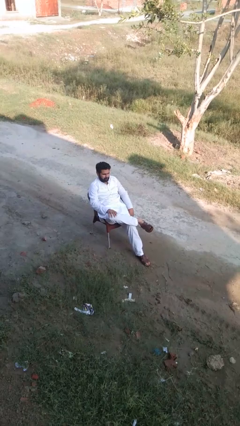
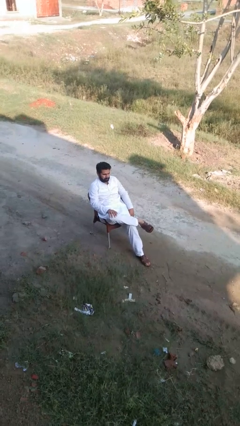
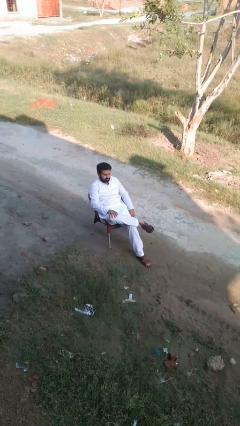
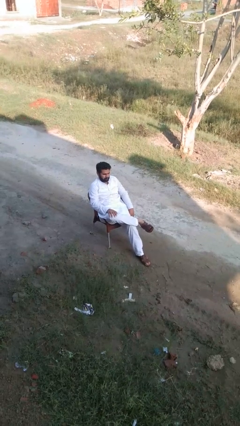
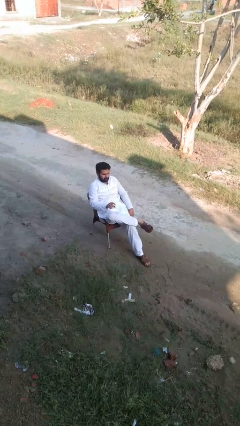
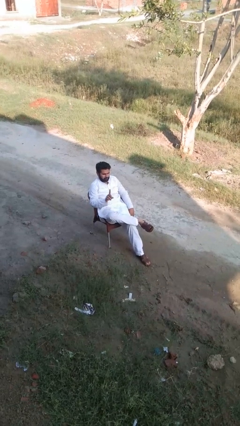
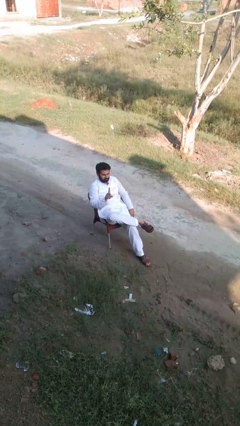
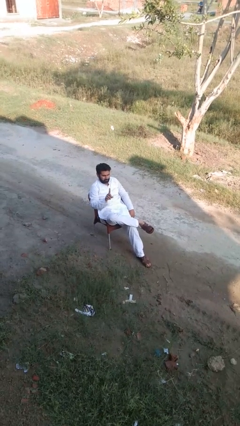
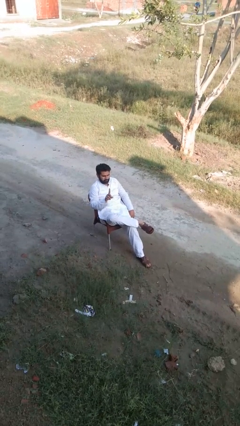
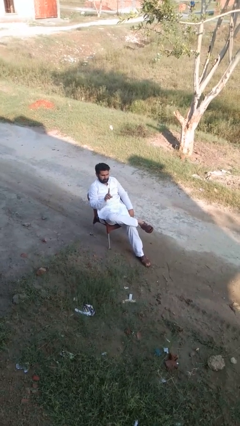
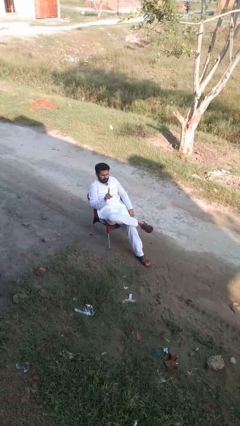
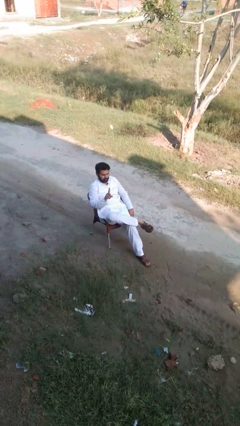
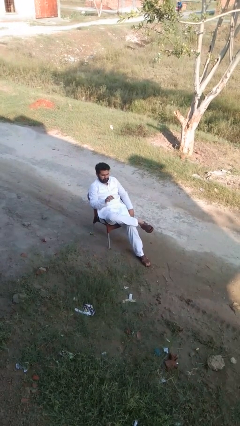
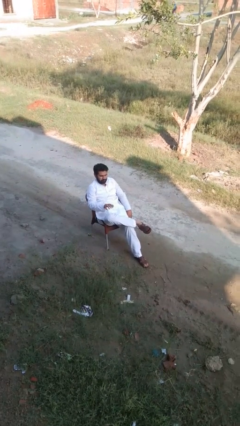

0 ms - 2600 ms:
person gestures number one

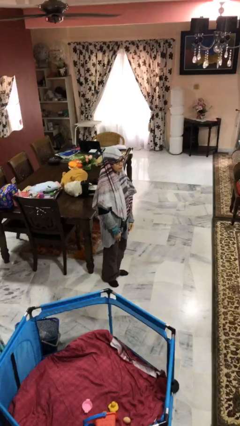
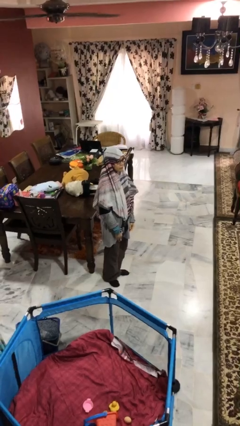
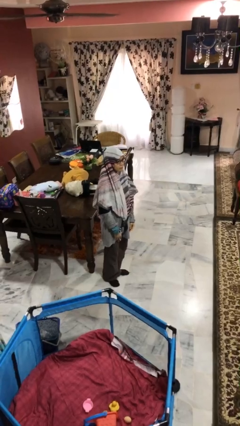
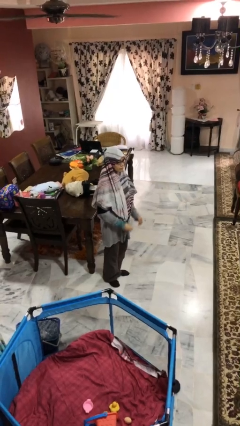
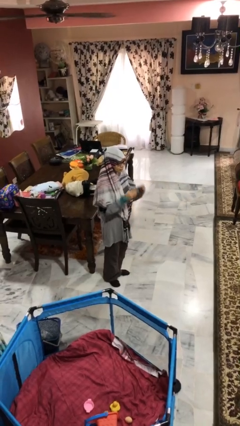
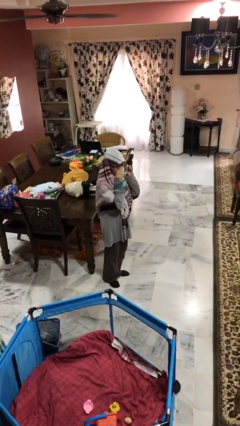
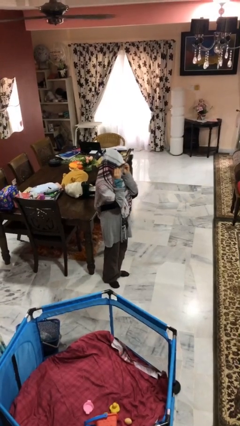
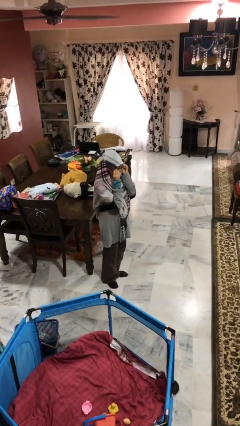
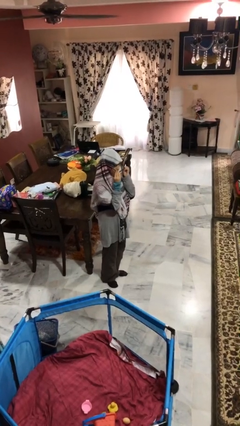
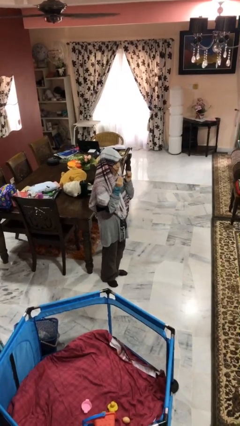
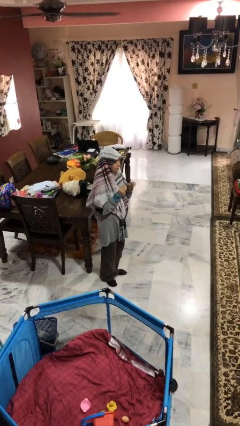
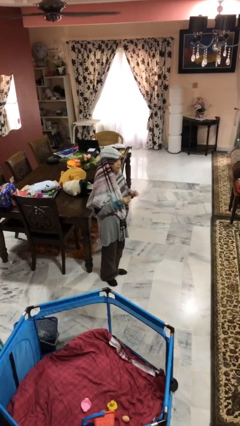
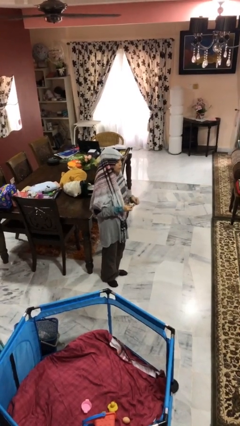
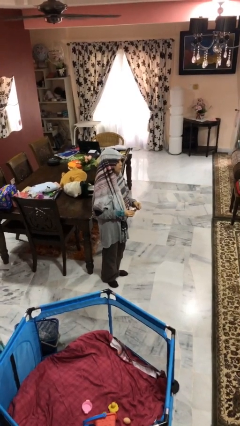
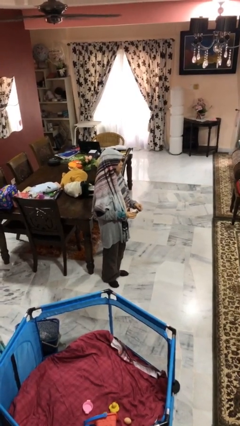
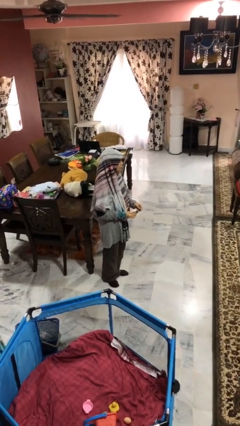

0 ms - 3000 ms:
person takes off glasses

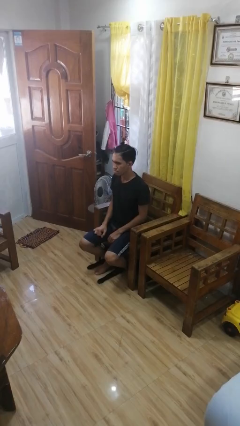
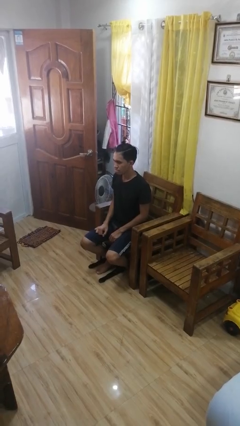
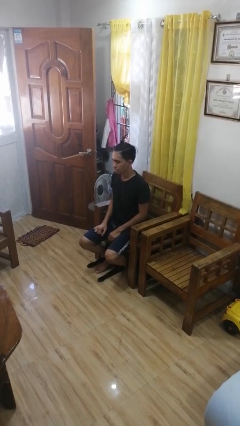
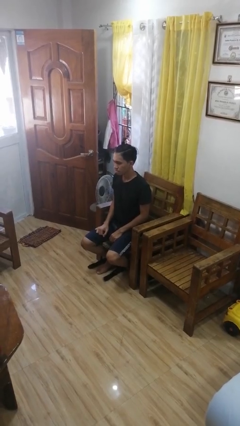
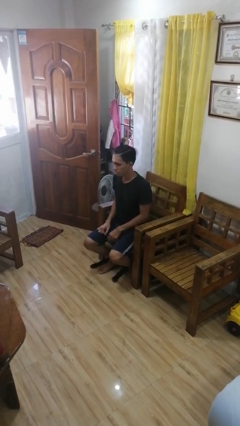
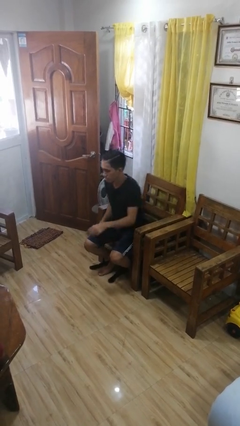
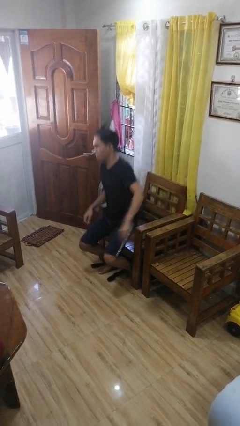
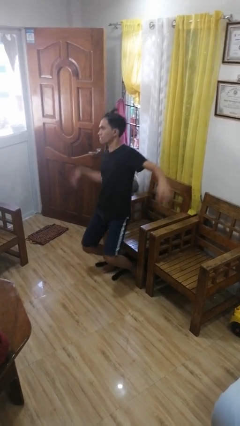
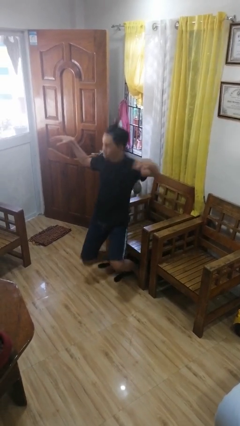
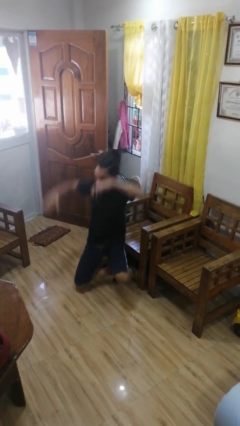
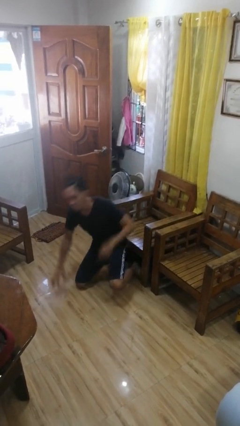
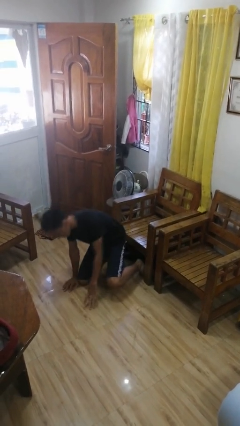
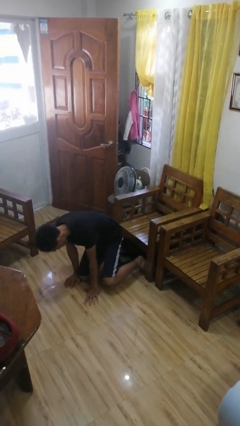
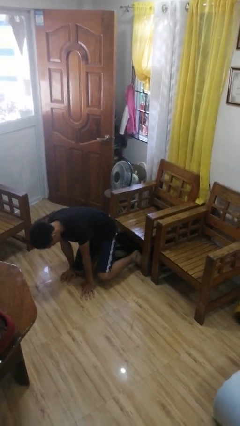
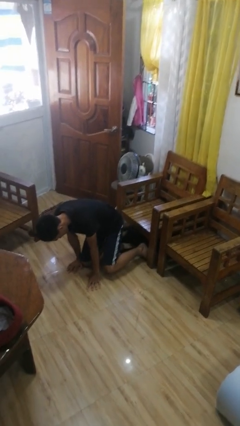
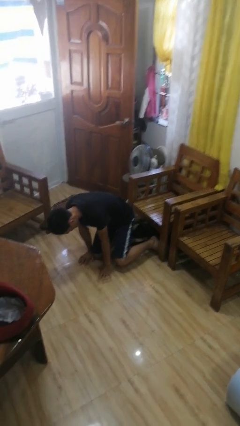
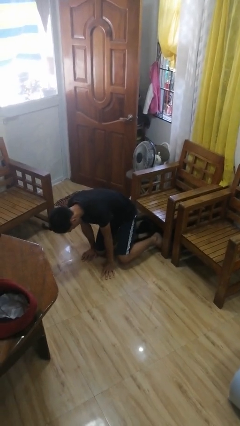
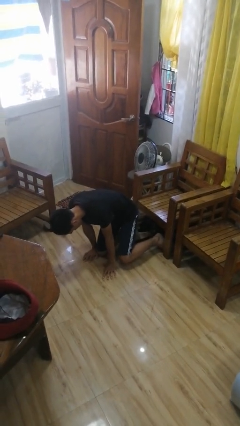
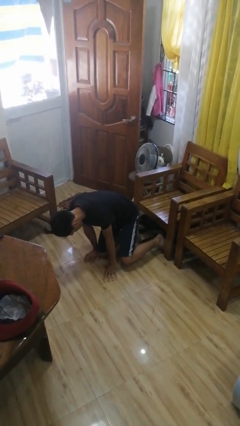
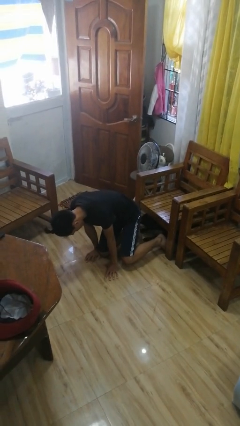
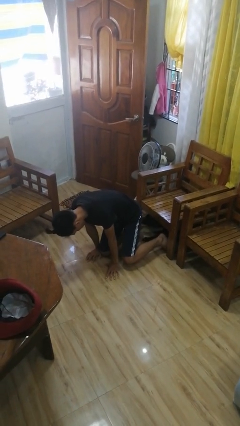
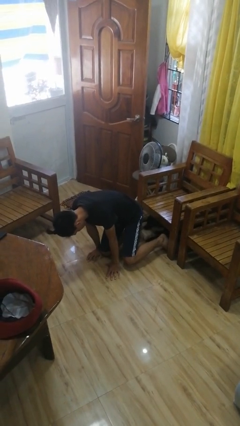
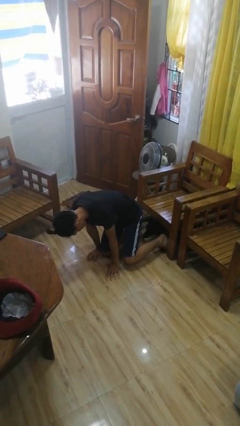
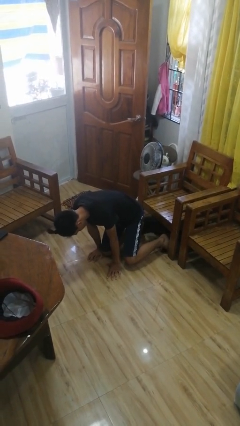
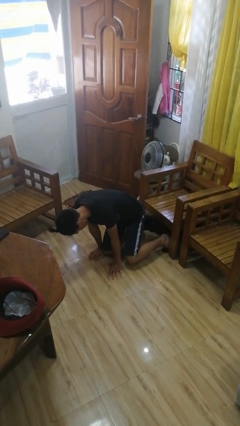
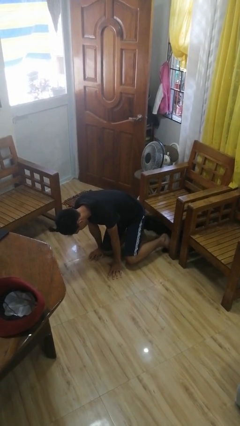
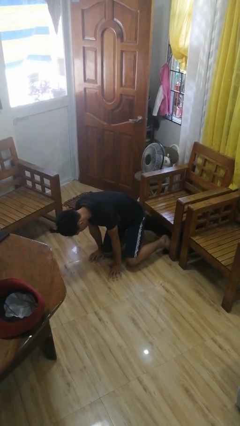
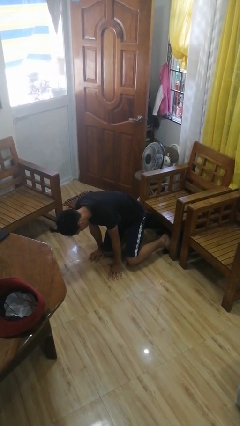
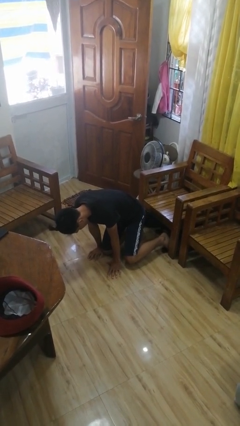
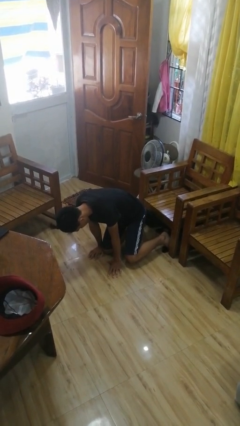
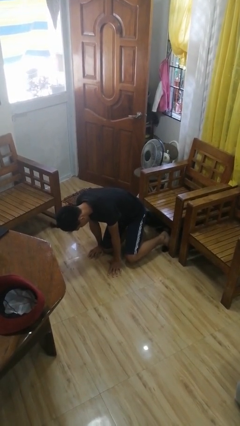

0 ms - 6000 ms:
person falls from chair

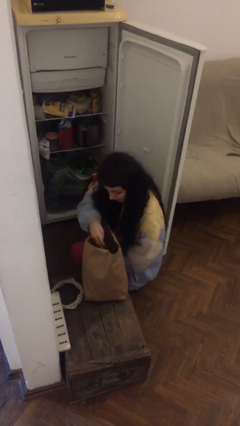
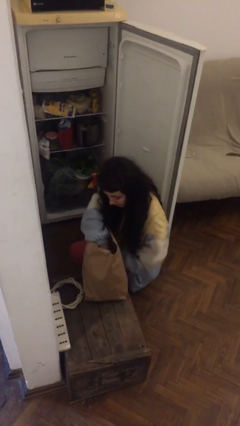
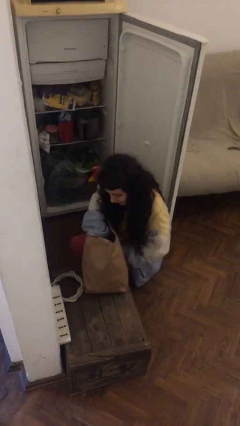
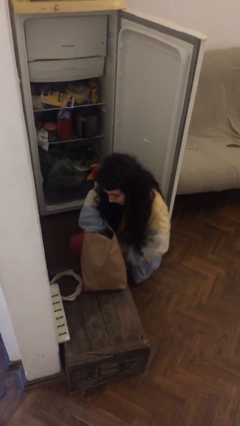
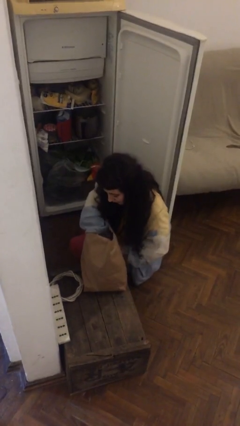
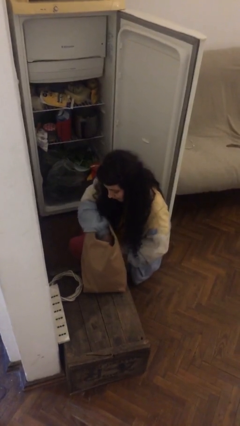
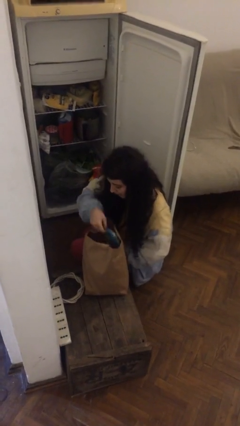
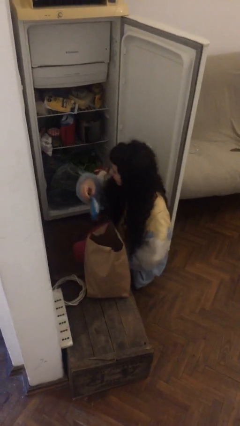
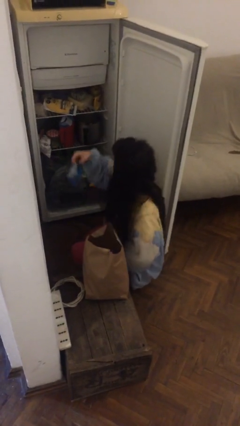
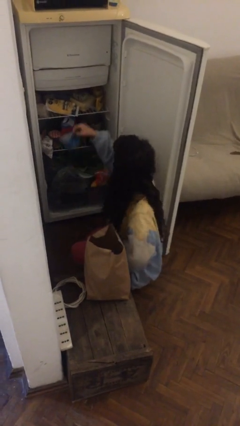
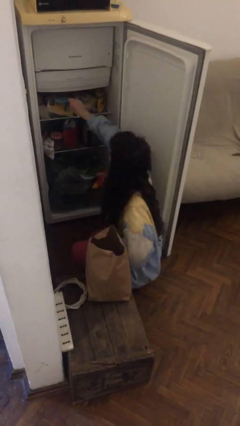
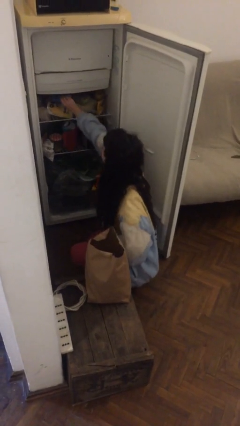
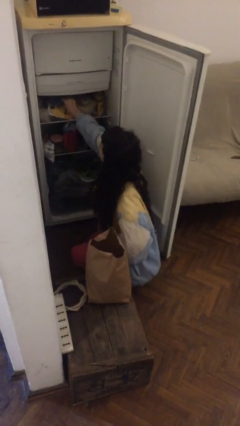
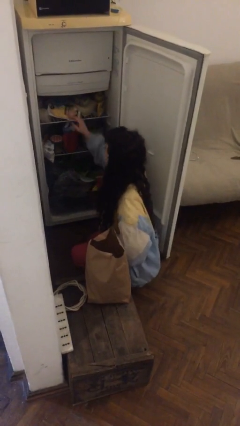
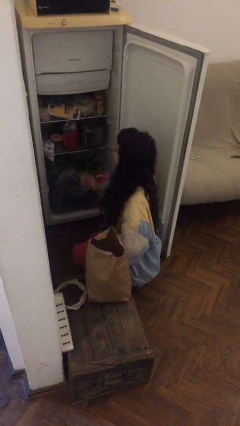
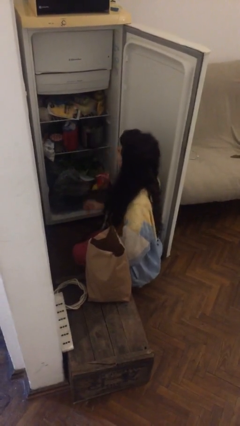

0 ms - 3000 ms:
person loads groceries into refrigerator

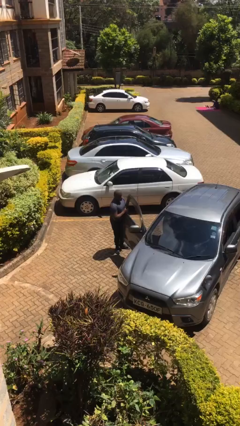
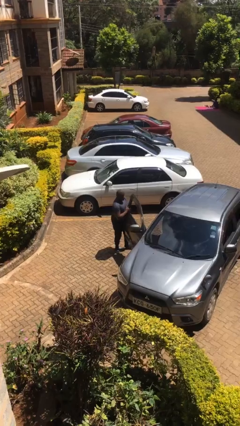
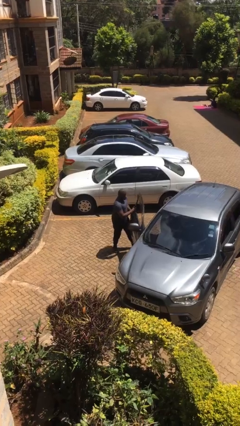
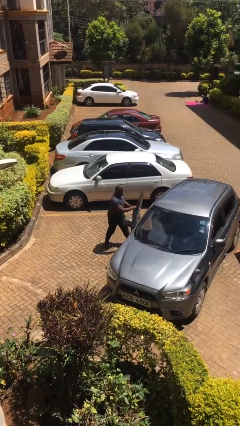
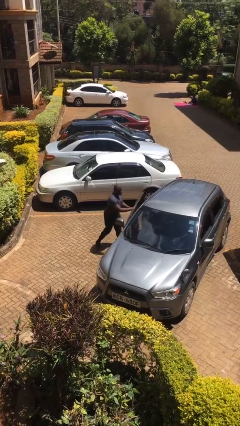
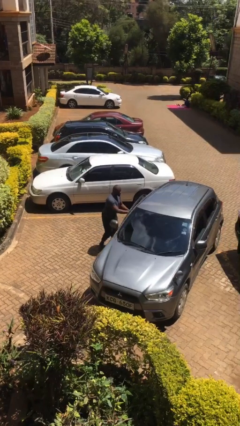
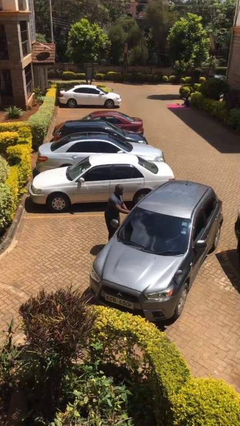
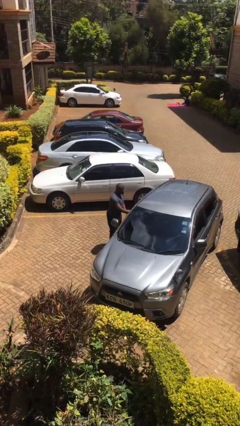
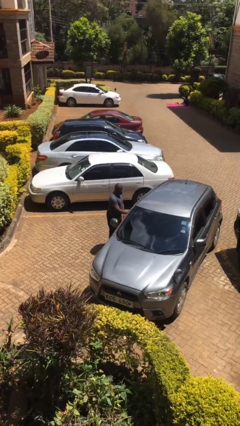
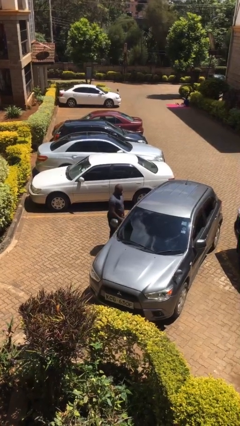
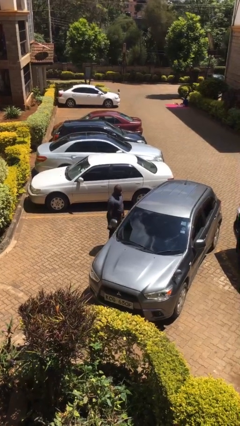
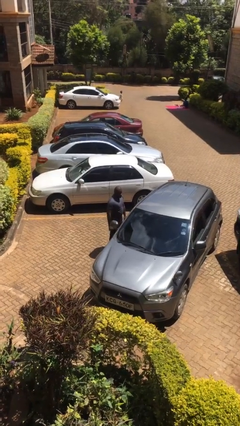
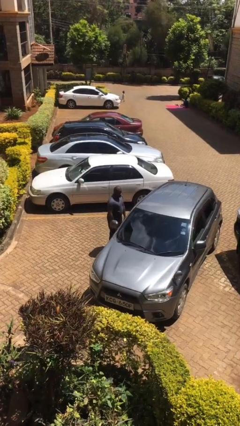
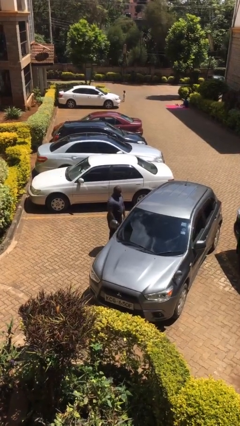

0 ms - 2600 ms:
person closes car door
